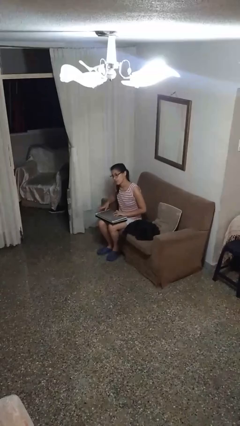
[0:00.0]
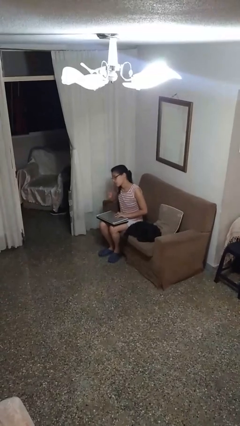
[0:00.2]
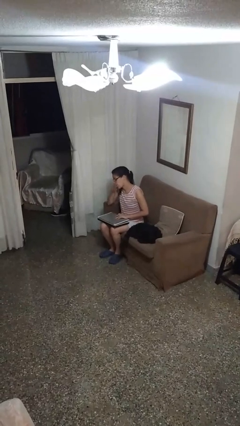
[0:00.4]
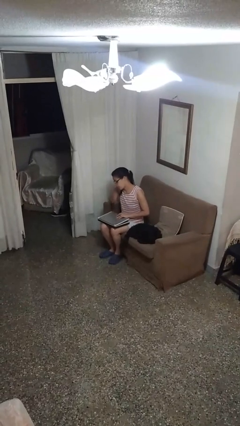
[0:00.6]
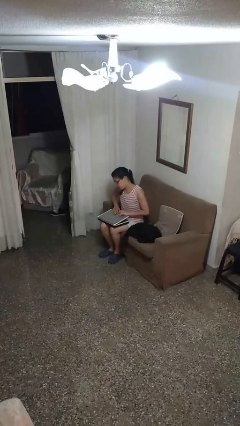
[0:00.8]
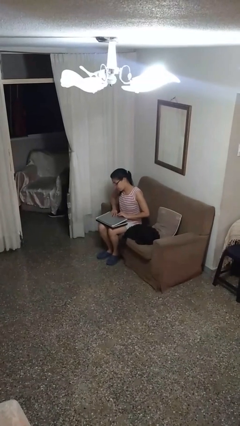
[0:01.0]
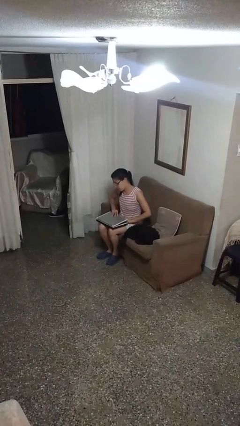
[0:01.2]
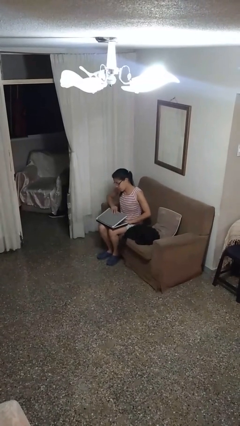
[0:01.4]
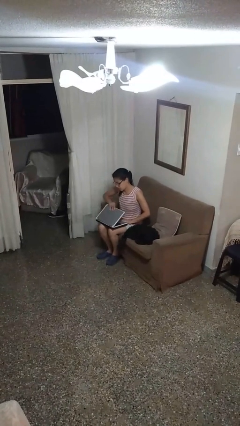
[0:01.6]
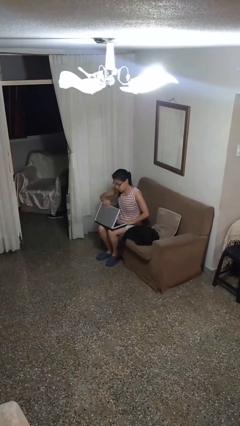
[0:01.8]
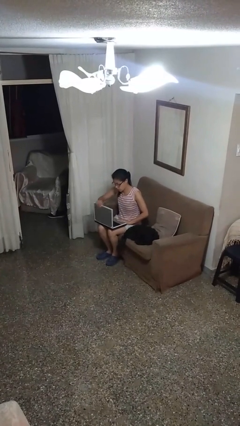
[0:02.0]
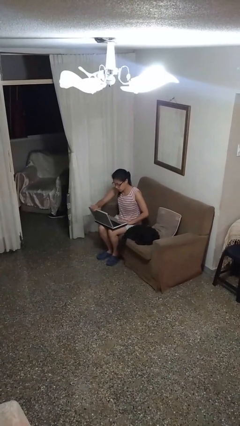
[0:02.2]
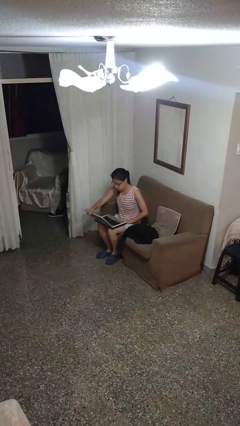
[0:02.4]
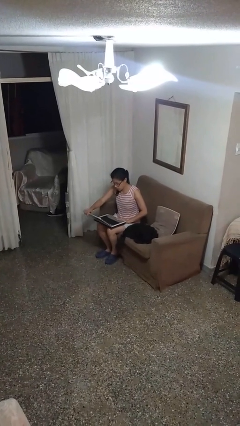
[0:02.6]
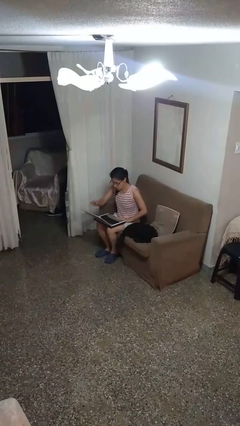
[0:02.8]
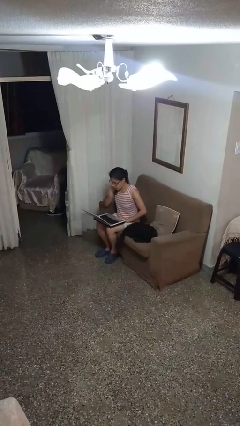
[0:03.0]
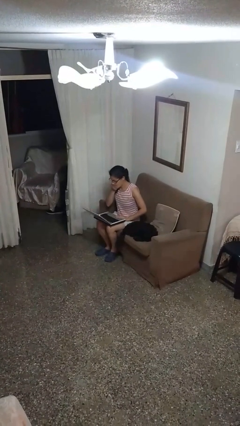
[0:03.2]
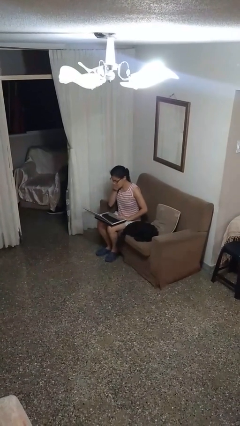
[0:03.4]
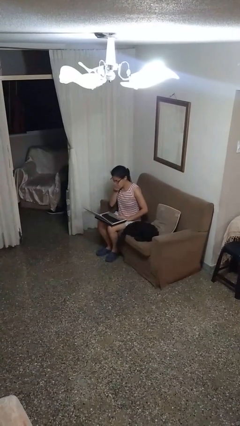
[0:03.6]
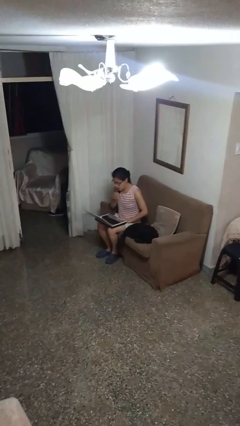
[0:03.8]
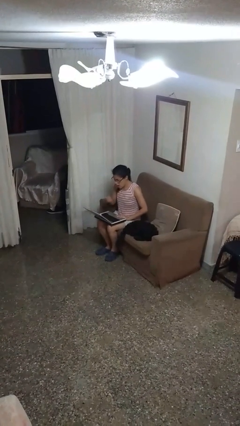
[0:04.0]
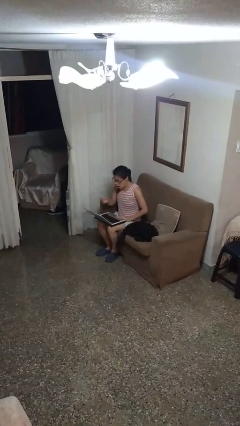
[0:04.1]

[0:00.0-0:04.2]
person opens laptop

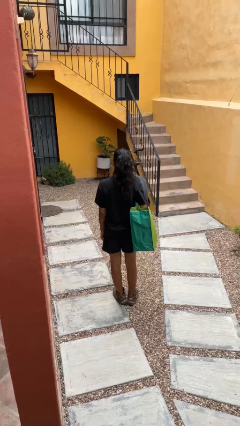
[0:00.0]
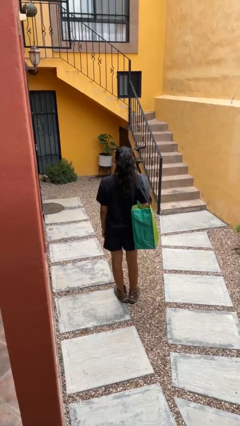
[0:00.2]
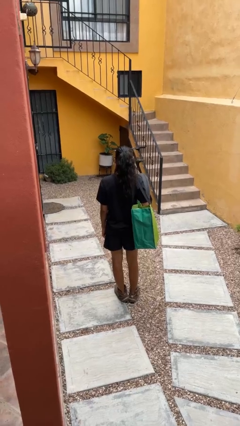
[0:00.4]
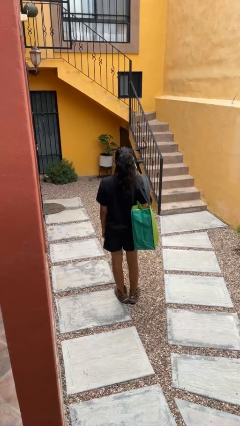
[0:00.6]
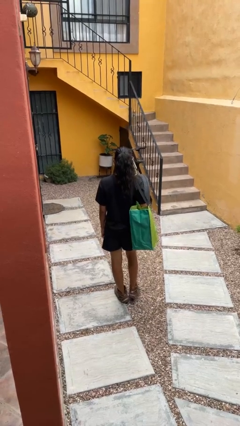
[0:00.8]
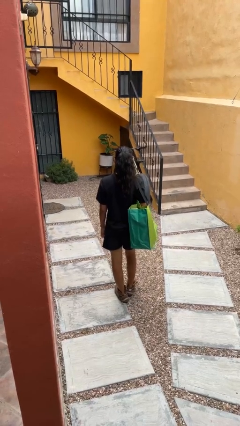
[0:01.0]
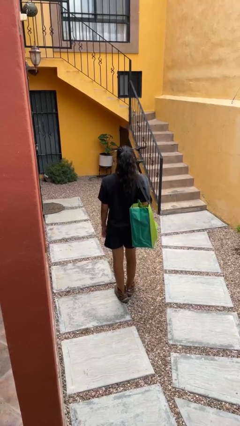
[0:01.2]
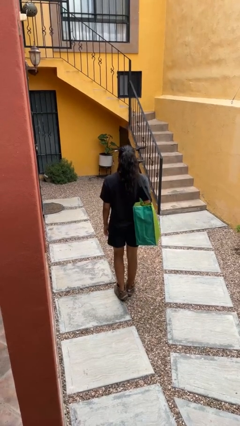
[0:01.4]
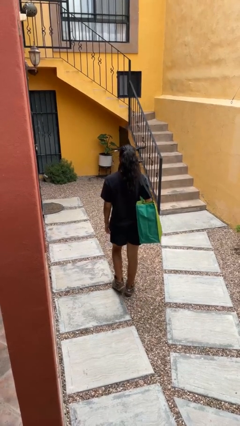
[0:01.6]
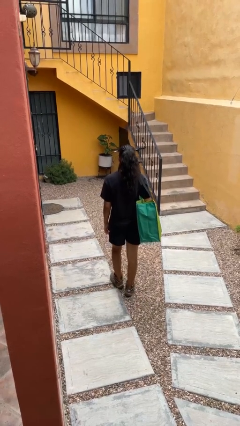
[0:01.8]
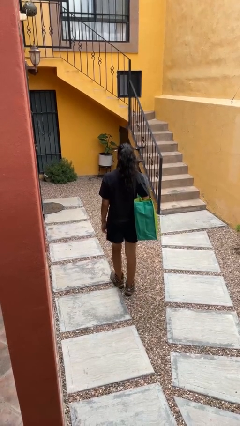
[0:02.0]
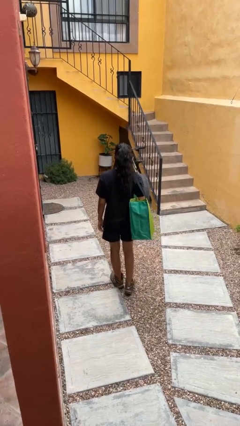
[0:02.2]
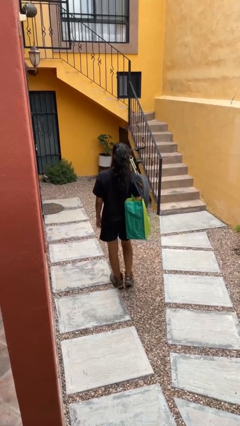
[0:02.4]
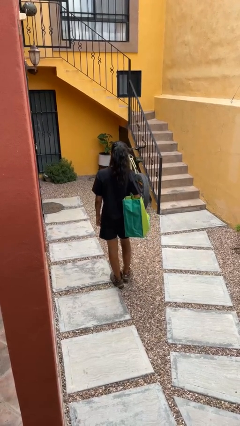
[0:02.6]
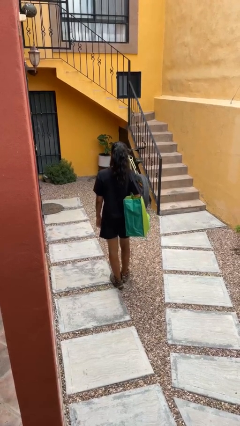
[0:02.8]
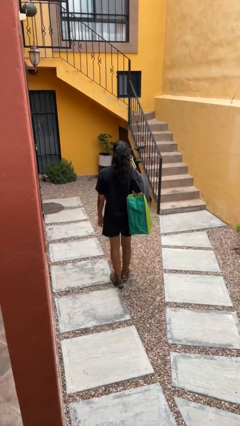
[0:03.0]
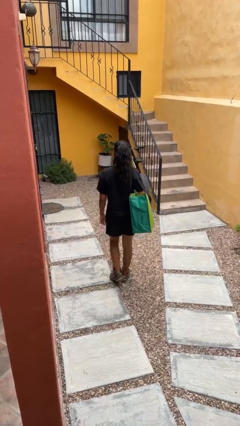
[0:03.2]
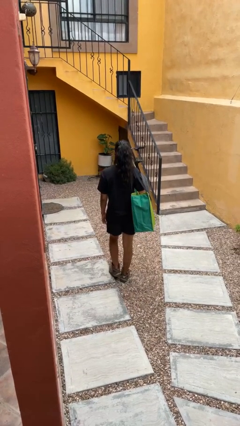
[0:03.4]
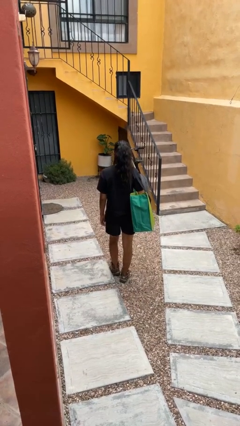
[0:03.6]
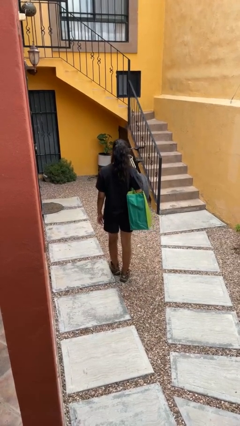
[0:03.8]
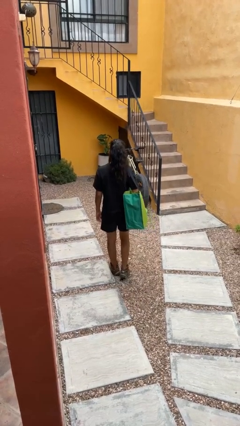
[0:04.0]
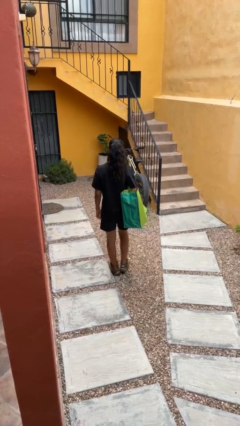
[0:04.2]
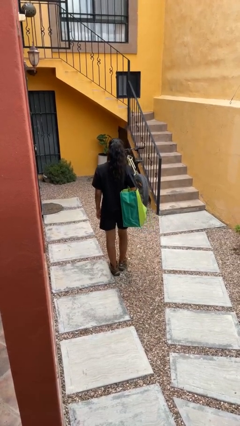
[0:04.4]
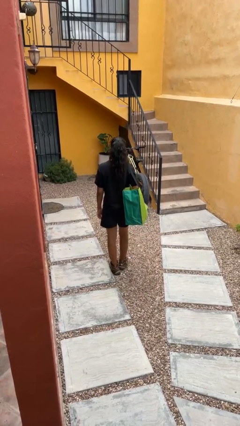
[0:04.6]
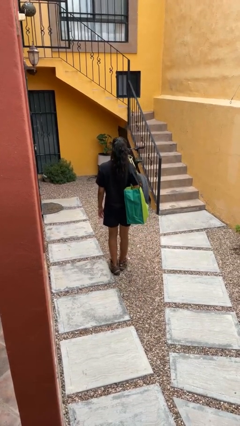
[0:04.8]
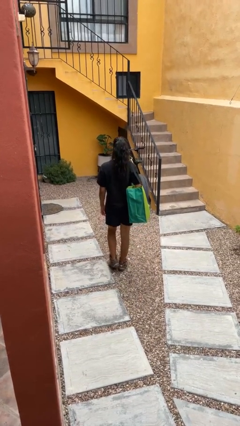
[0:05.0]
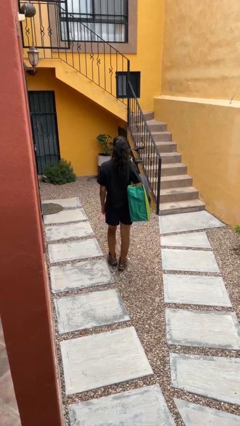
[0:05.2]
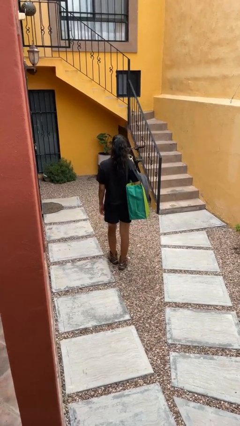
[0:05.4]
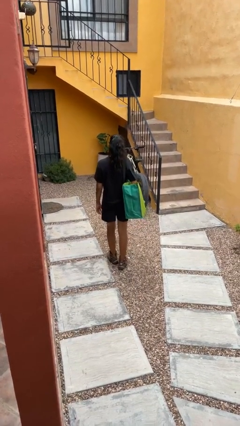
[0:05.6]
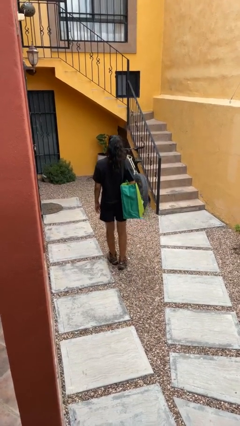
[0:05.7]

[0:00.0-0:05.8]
person carries groceries

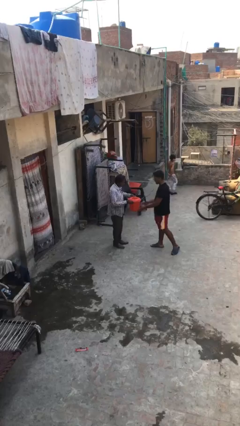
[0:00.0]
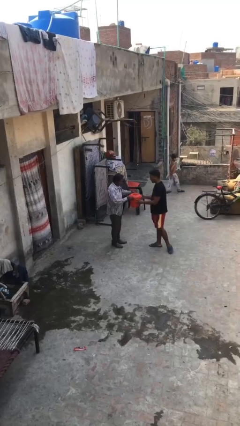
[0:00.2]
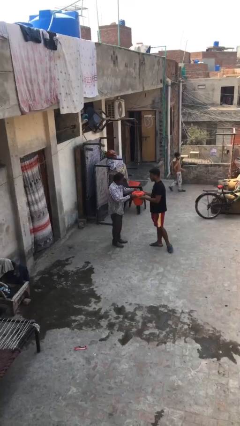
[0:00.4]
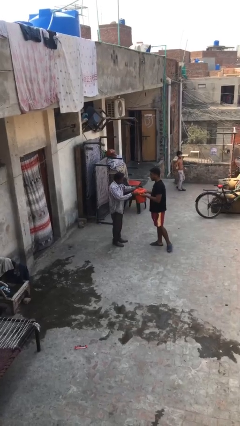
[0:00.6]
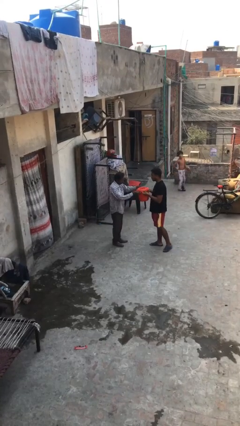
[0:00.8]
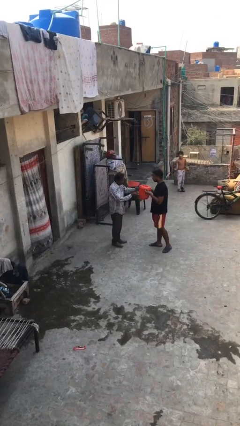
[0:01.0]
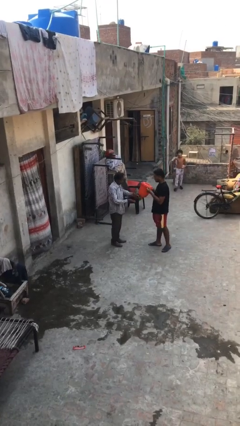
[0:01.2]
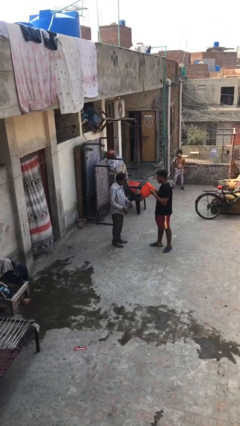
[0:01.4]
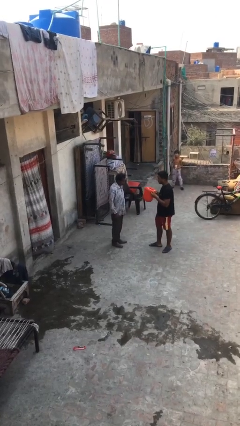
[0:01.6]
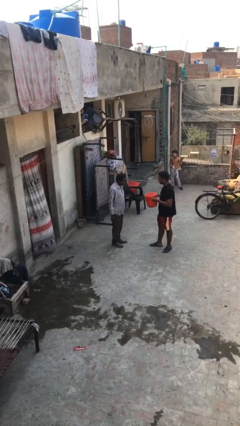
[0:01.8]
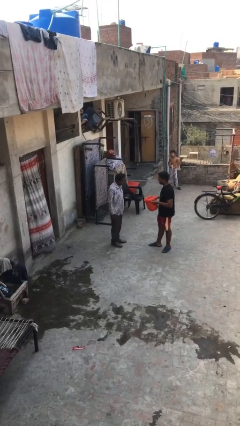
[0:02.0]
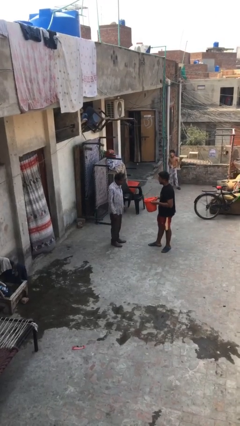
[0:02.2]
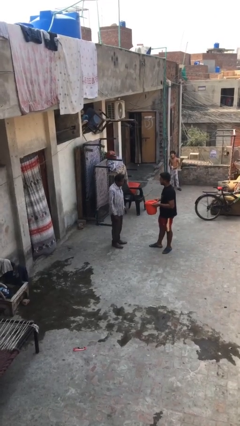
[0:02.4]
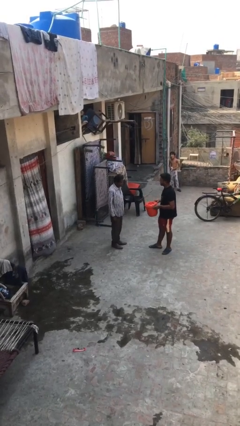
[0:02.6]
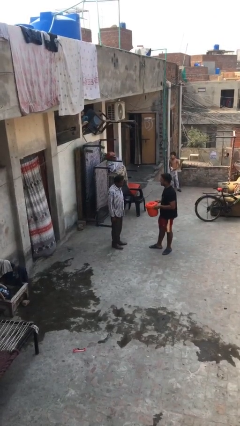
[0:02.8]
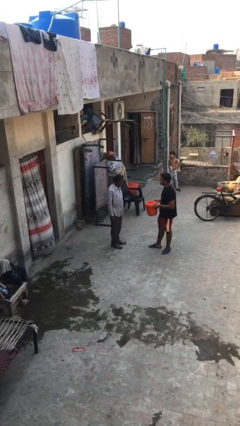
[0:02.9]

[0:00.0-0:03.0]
person transfers object to person

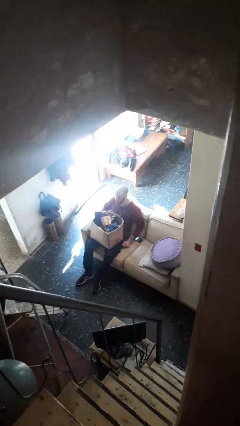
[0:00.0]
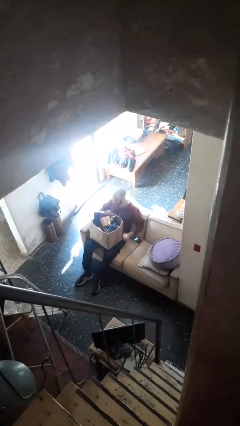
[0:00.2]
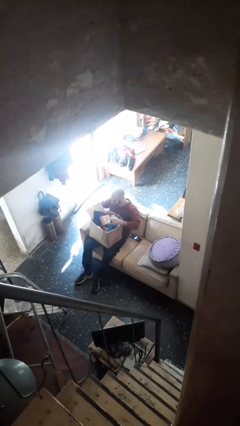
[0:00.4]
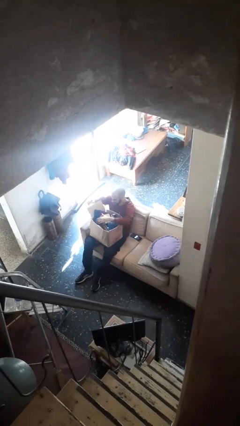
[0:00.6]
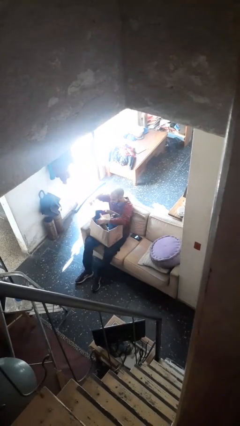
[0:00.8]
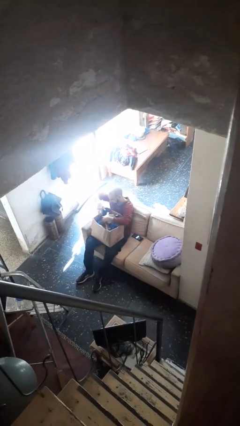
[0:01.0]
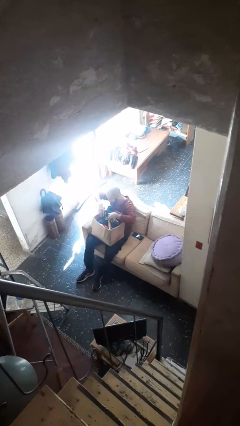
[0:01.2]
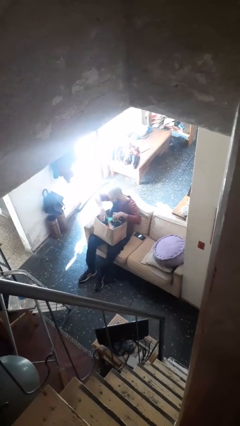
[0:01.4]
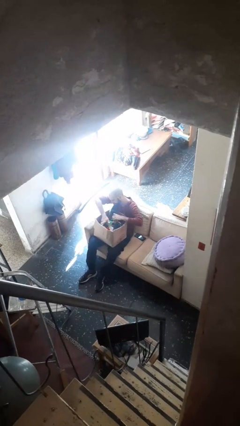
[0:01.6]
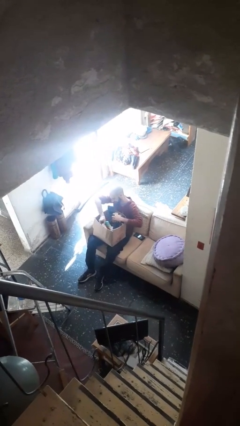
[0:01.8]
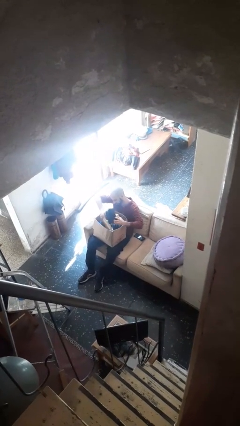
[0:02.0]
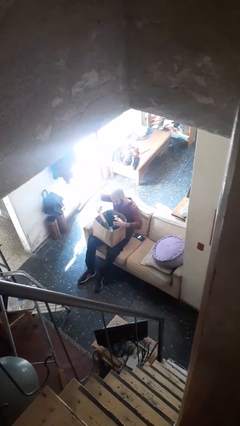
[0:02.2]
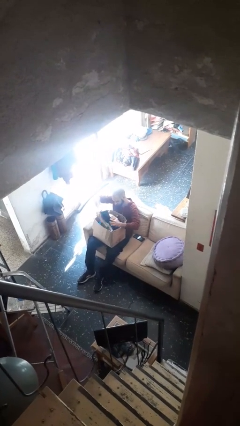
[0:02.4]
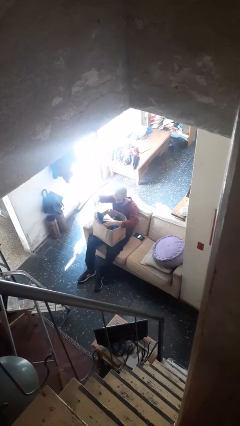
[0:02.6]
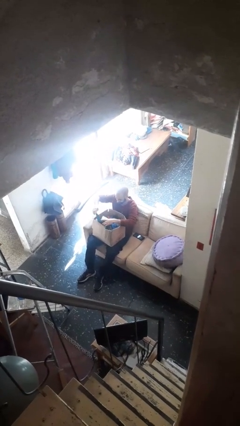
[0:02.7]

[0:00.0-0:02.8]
person searches in box

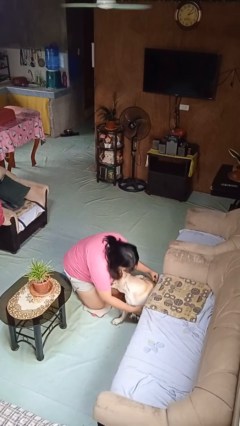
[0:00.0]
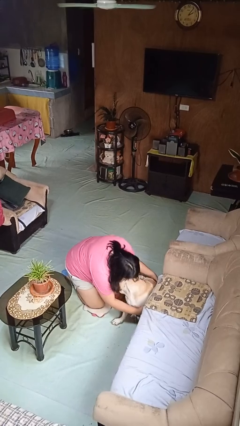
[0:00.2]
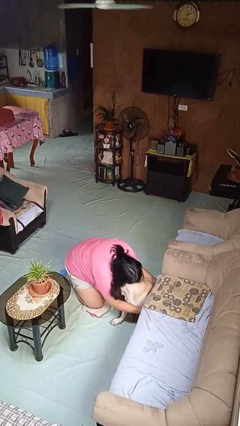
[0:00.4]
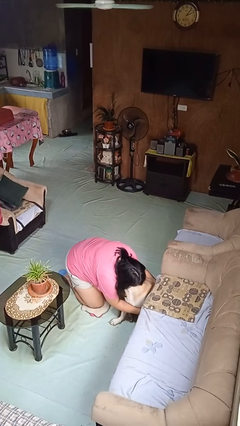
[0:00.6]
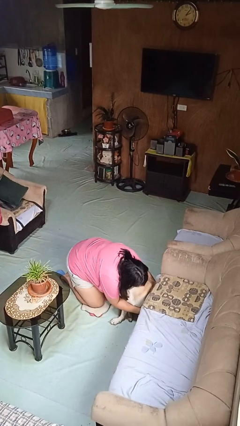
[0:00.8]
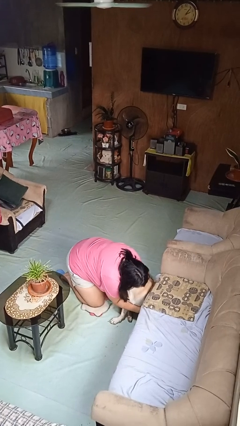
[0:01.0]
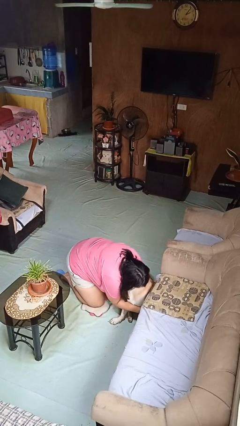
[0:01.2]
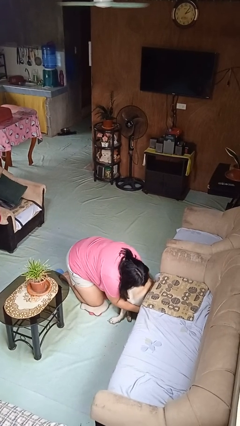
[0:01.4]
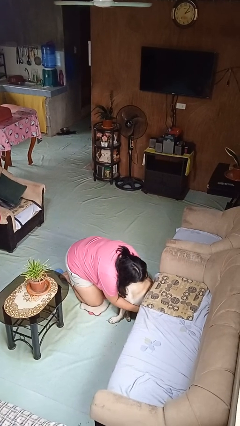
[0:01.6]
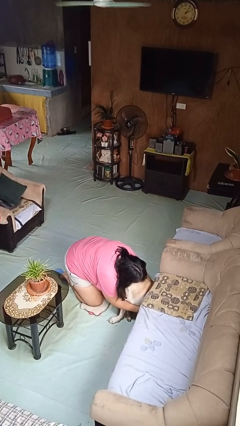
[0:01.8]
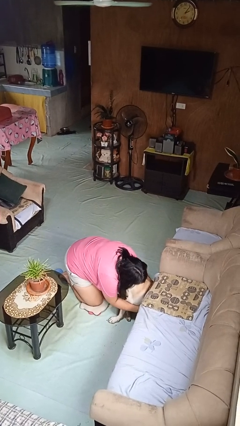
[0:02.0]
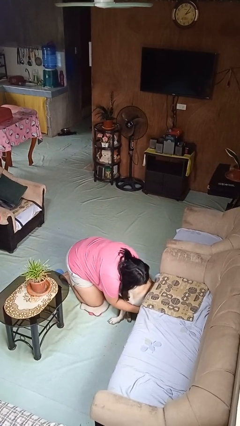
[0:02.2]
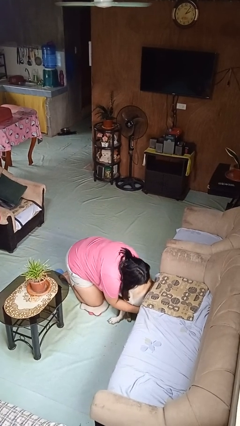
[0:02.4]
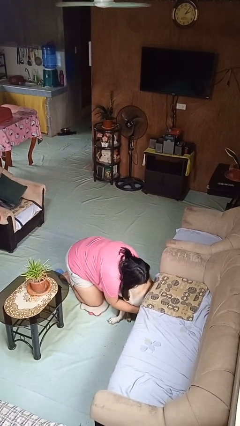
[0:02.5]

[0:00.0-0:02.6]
person hugs dog
